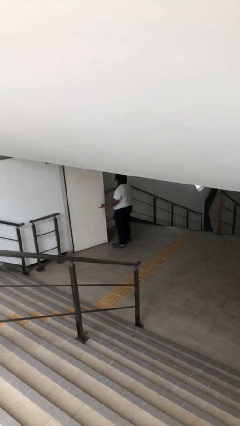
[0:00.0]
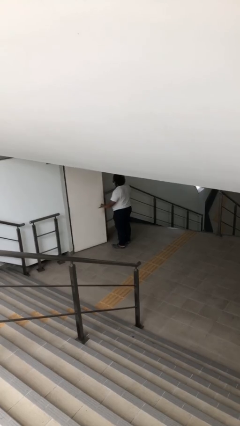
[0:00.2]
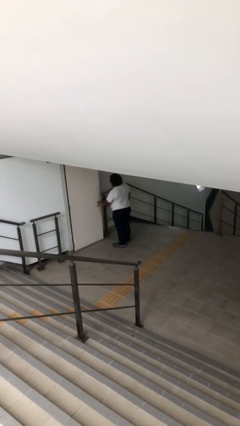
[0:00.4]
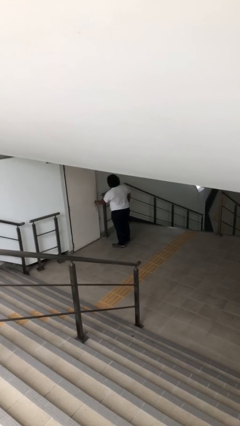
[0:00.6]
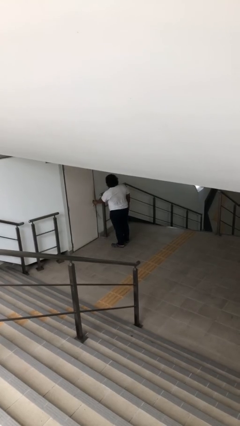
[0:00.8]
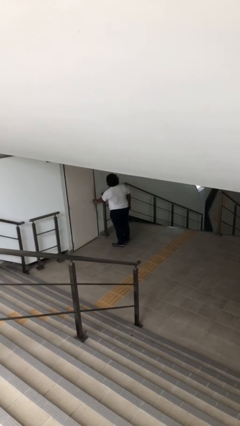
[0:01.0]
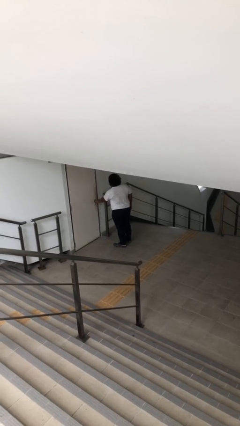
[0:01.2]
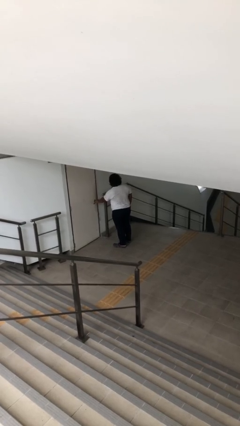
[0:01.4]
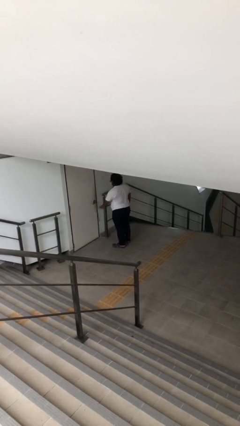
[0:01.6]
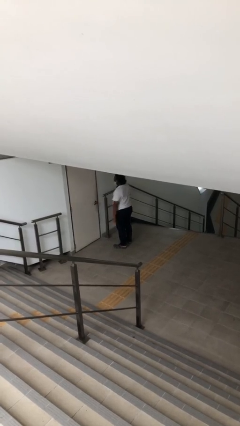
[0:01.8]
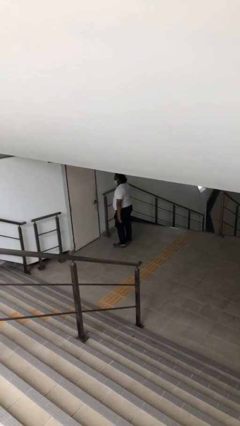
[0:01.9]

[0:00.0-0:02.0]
person closes facility door

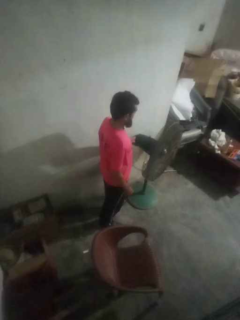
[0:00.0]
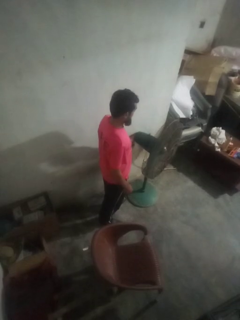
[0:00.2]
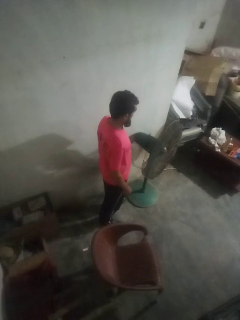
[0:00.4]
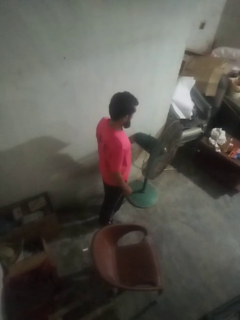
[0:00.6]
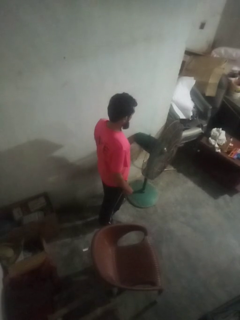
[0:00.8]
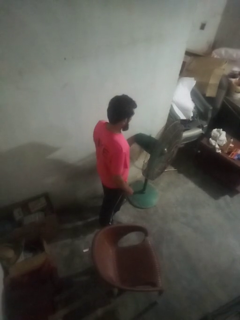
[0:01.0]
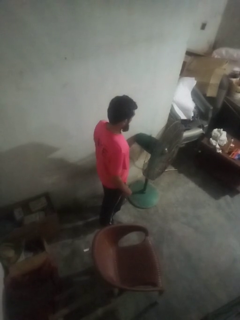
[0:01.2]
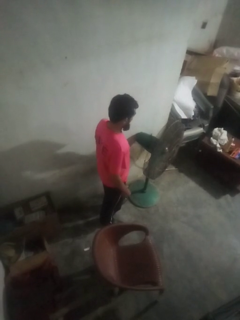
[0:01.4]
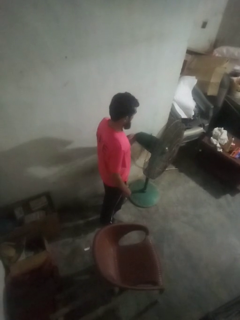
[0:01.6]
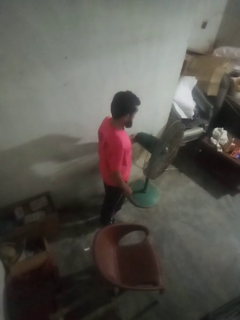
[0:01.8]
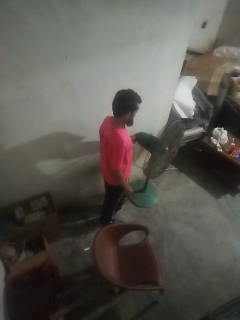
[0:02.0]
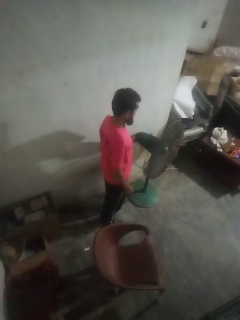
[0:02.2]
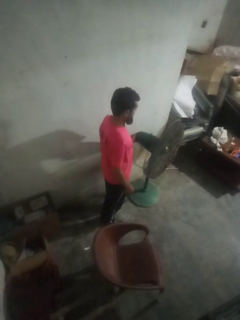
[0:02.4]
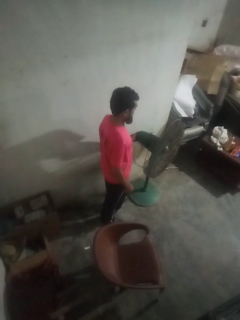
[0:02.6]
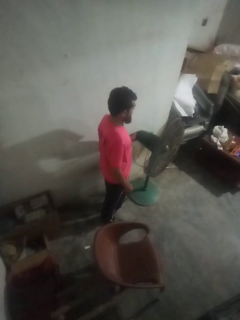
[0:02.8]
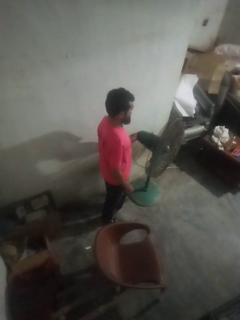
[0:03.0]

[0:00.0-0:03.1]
person turns off fan

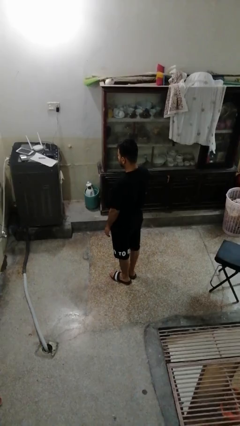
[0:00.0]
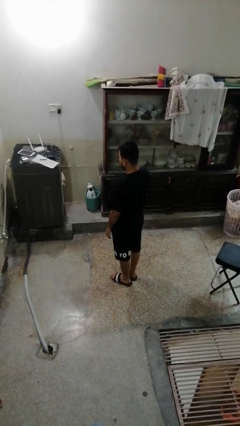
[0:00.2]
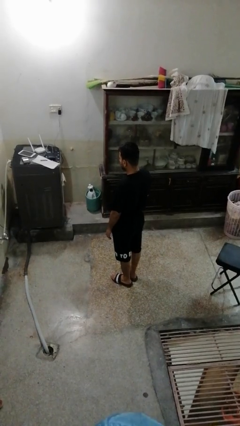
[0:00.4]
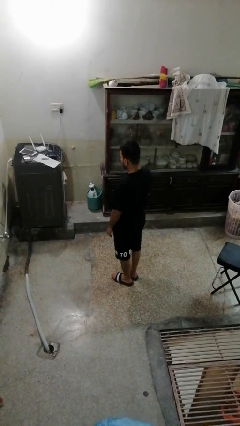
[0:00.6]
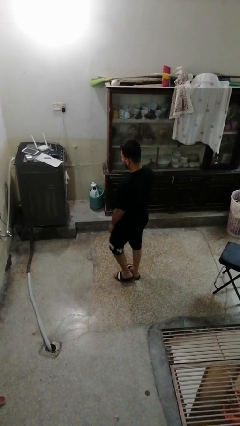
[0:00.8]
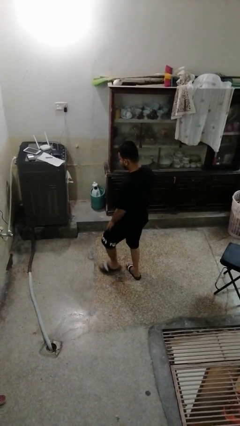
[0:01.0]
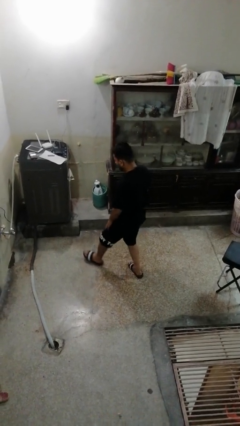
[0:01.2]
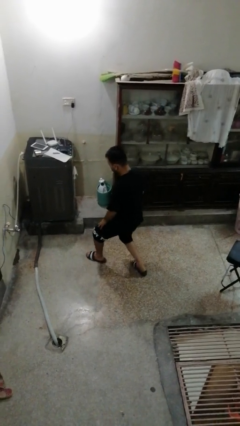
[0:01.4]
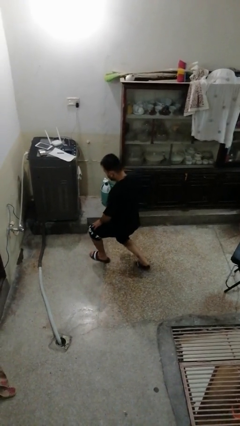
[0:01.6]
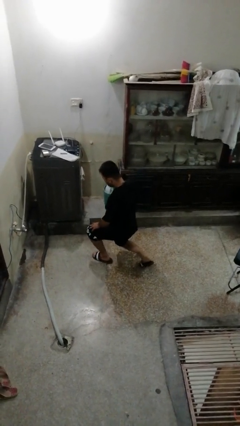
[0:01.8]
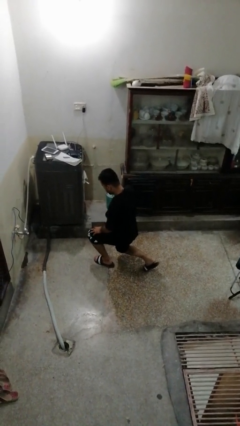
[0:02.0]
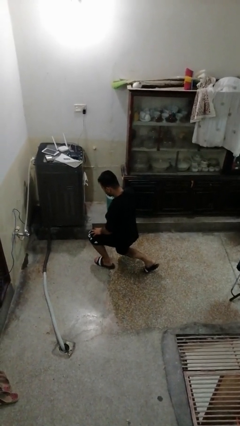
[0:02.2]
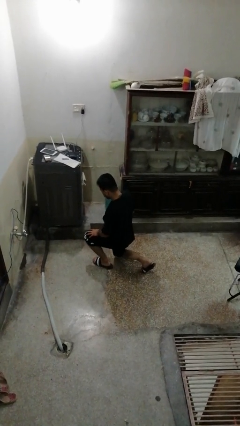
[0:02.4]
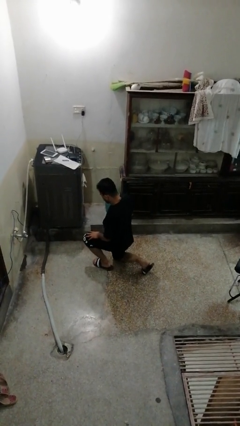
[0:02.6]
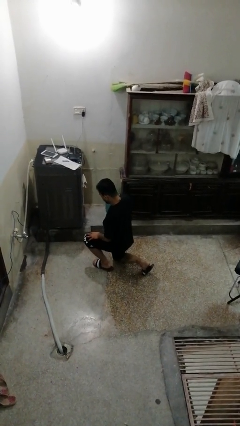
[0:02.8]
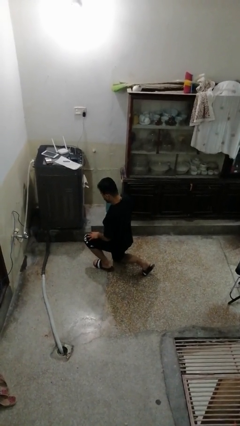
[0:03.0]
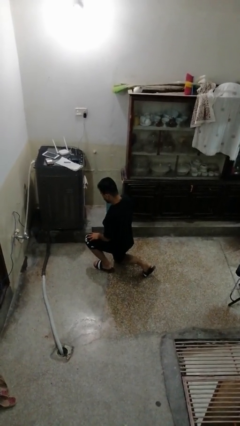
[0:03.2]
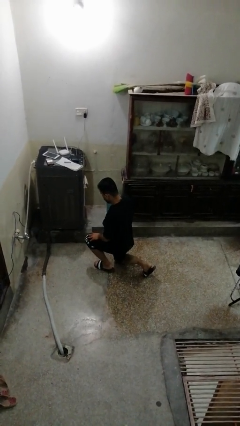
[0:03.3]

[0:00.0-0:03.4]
person exercises with lunges

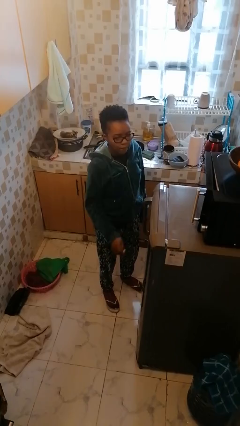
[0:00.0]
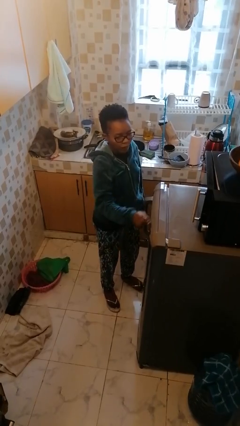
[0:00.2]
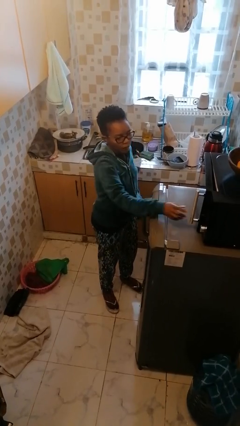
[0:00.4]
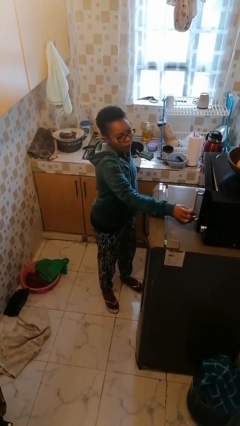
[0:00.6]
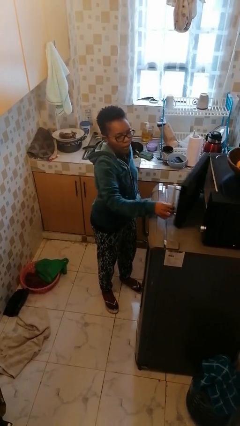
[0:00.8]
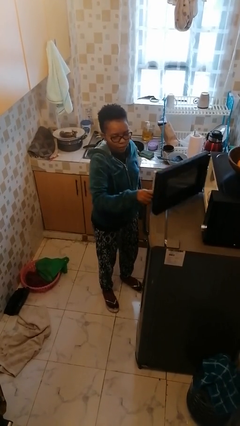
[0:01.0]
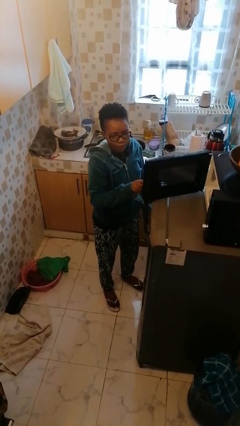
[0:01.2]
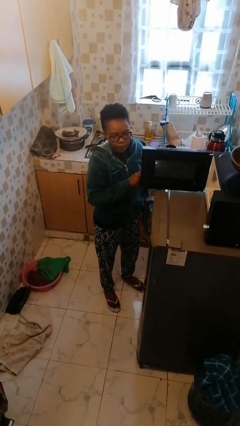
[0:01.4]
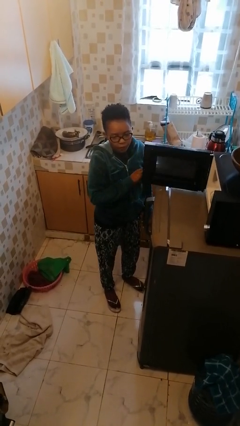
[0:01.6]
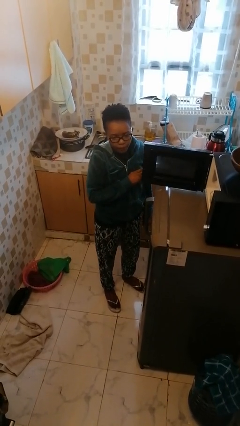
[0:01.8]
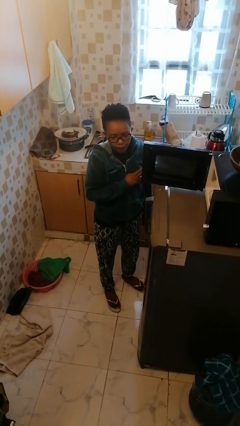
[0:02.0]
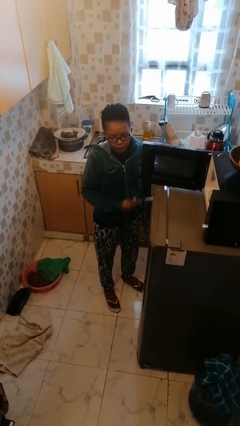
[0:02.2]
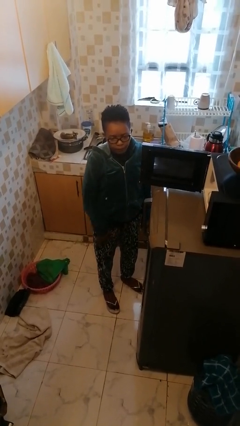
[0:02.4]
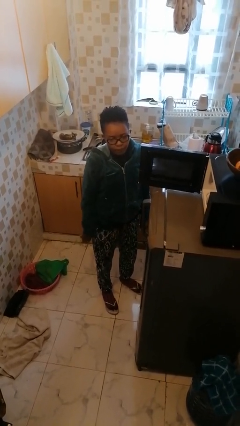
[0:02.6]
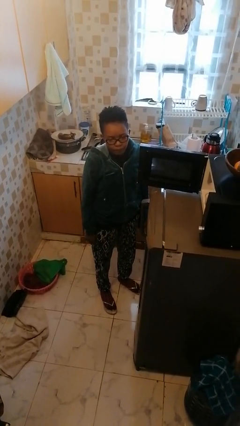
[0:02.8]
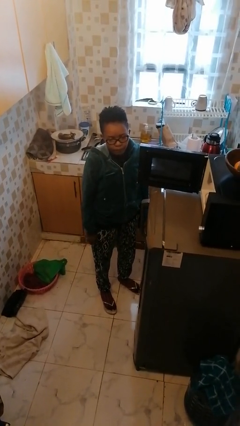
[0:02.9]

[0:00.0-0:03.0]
person opens microwave

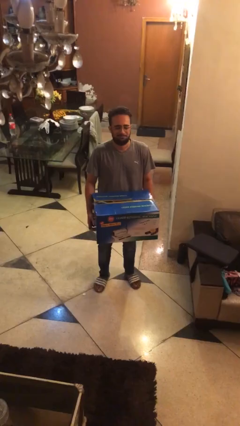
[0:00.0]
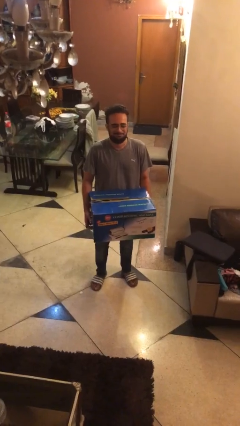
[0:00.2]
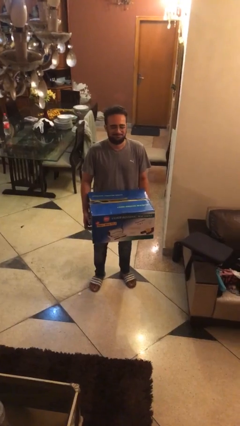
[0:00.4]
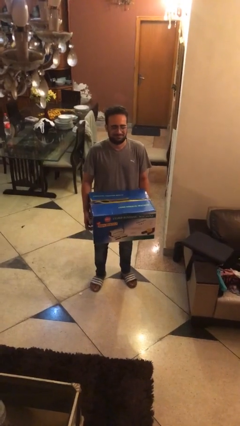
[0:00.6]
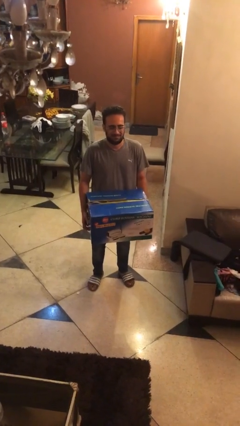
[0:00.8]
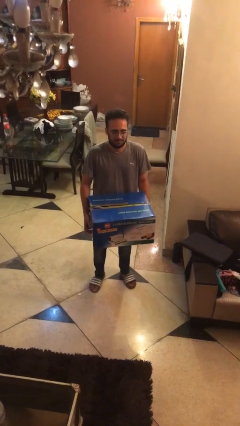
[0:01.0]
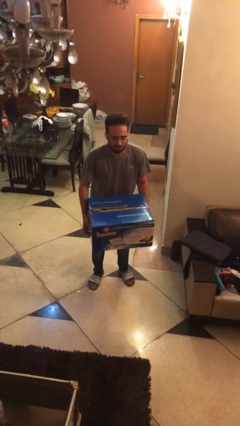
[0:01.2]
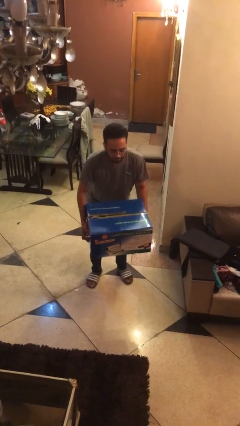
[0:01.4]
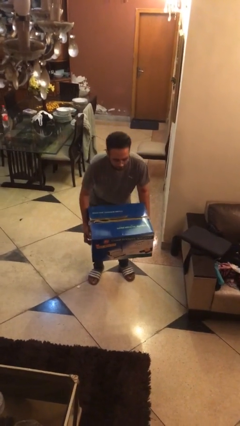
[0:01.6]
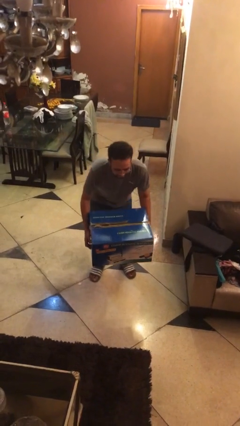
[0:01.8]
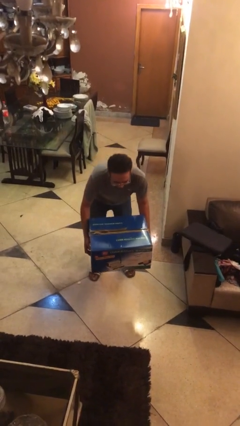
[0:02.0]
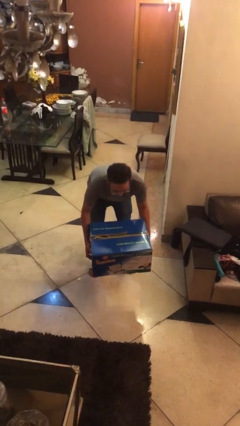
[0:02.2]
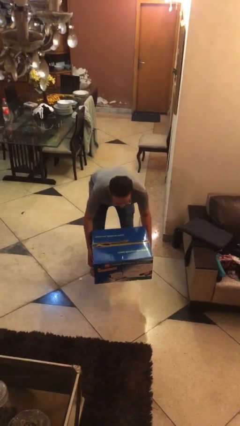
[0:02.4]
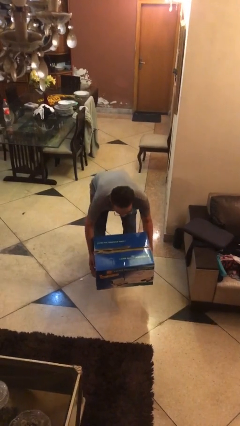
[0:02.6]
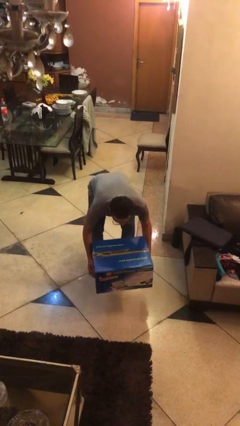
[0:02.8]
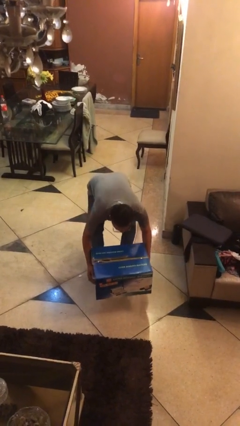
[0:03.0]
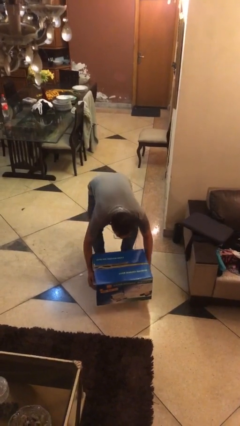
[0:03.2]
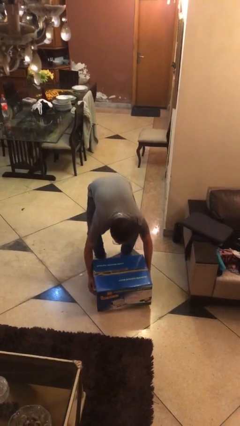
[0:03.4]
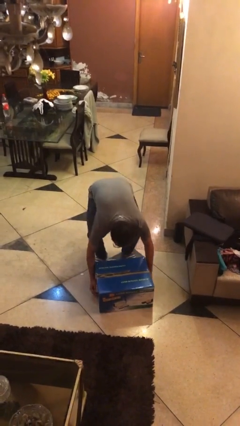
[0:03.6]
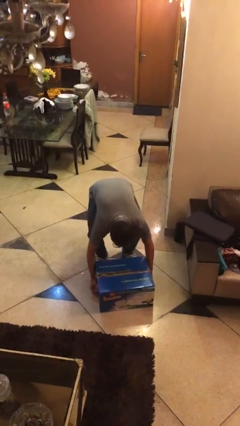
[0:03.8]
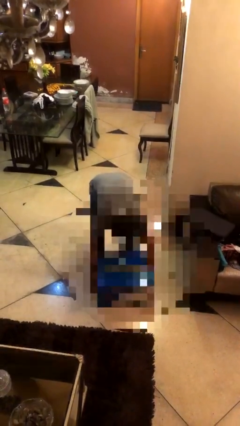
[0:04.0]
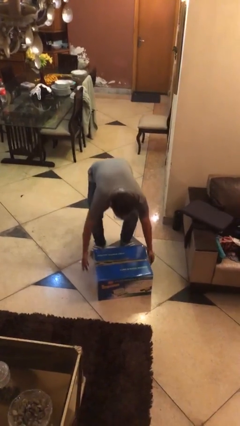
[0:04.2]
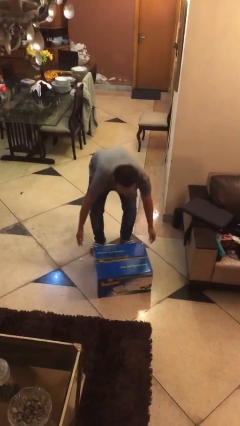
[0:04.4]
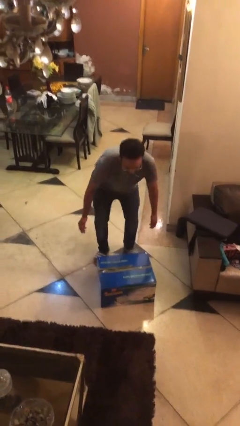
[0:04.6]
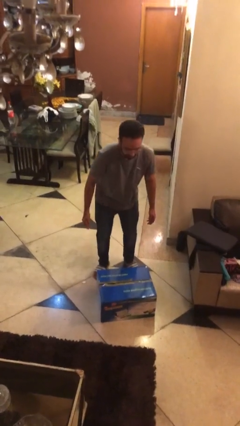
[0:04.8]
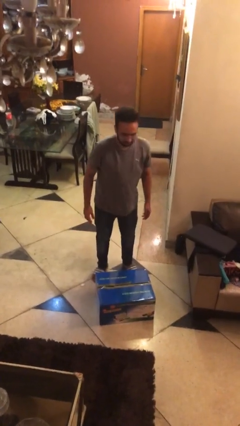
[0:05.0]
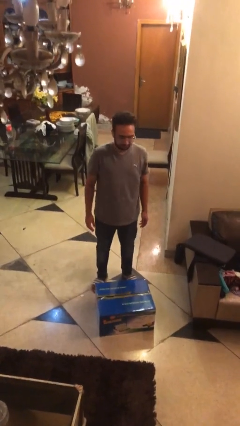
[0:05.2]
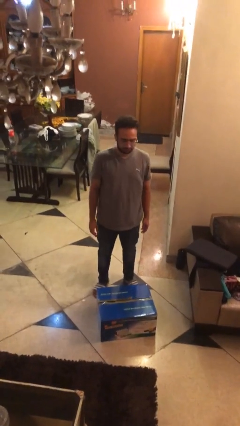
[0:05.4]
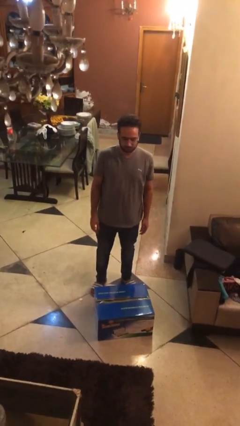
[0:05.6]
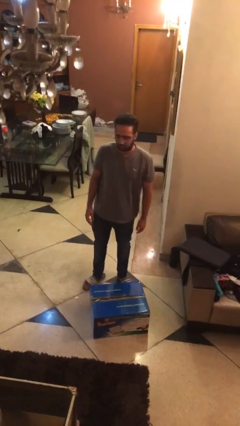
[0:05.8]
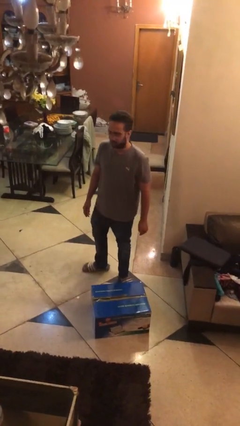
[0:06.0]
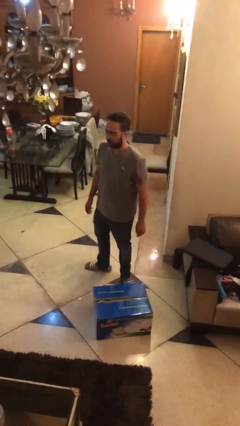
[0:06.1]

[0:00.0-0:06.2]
person puts down object on floor

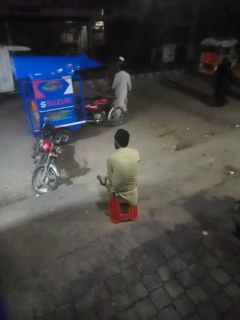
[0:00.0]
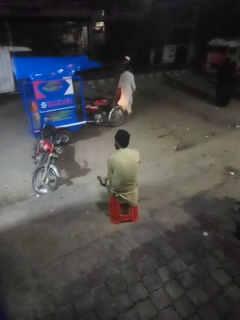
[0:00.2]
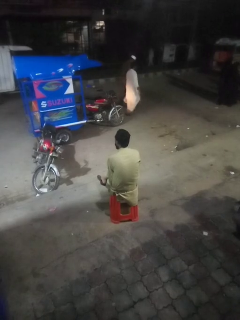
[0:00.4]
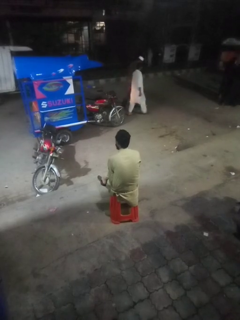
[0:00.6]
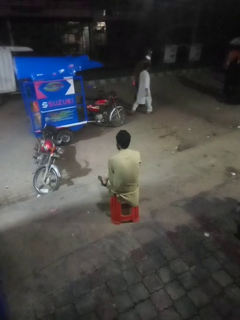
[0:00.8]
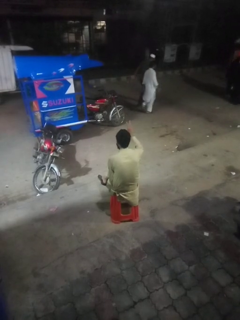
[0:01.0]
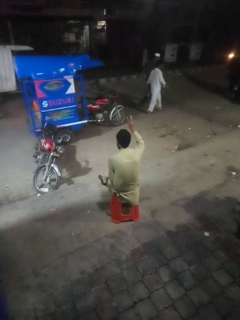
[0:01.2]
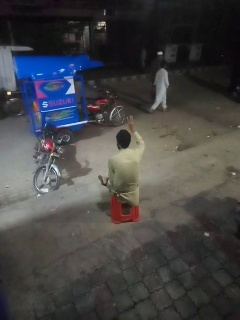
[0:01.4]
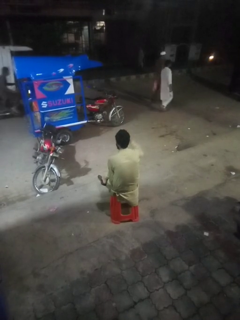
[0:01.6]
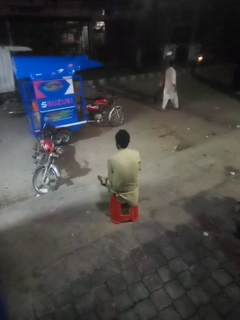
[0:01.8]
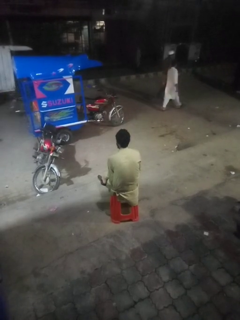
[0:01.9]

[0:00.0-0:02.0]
person gestures number three
